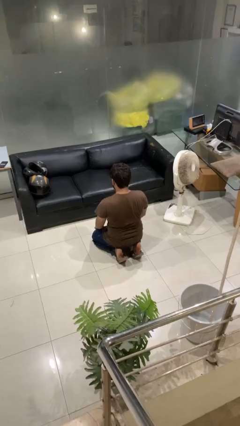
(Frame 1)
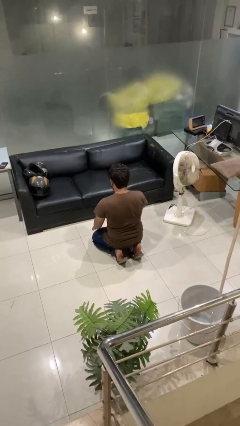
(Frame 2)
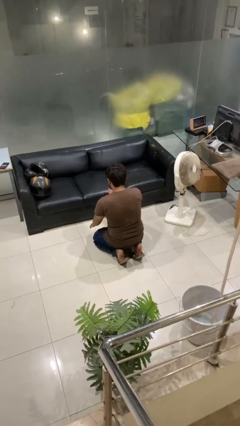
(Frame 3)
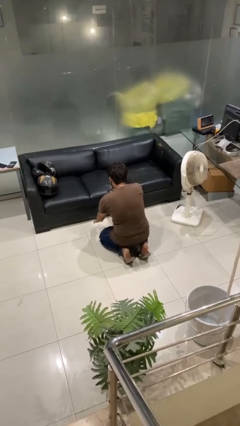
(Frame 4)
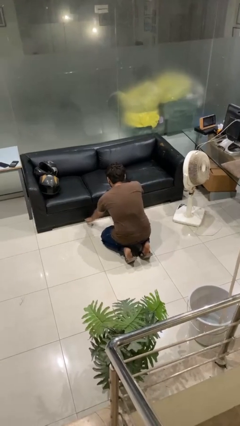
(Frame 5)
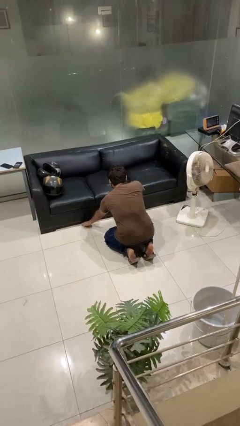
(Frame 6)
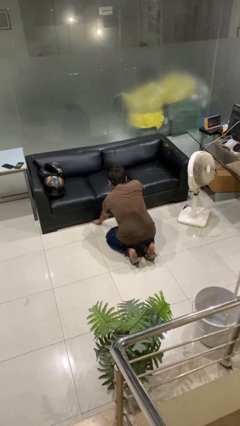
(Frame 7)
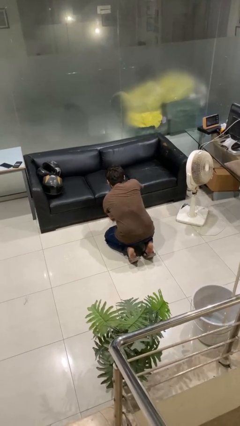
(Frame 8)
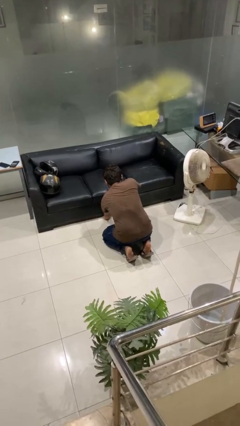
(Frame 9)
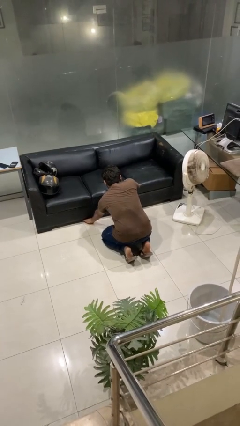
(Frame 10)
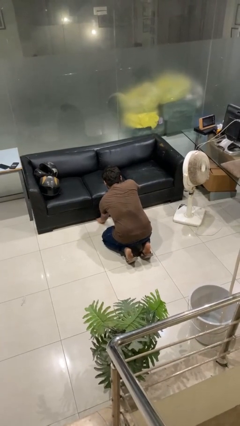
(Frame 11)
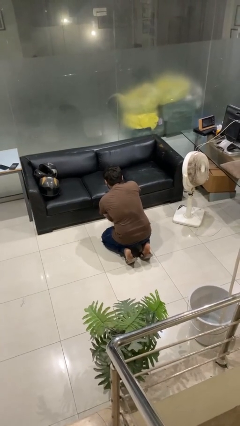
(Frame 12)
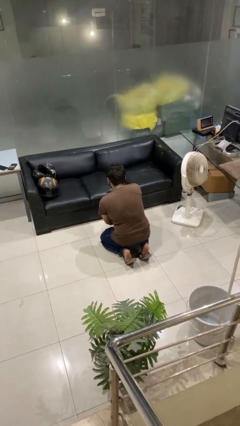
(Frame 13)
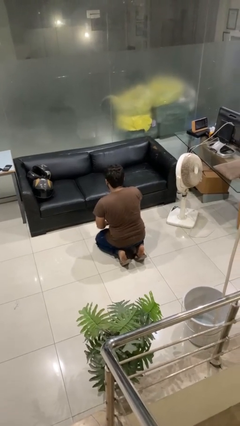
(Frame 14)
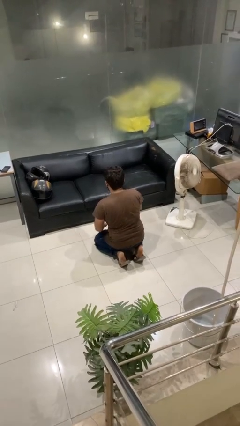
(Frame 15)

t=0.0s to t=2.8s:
person searches under couch

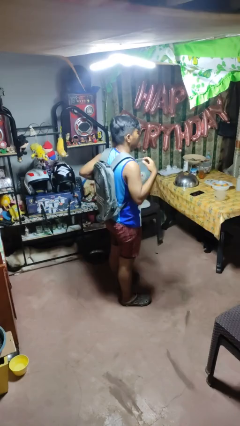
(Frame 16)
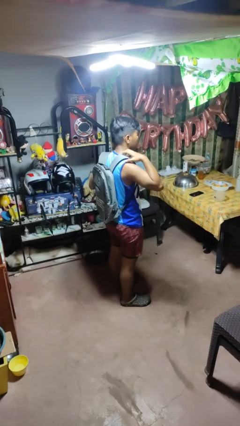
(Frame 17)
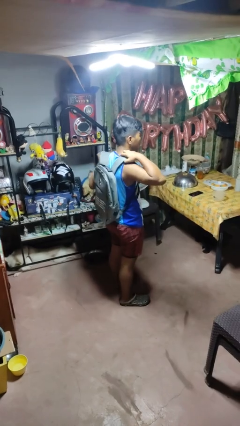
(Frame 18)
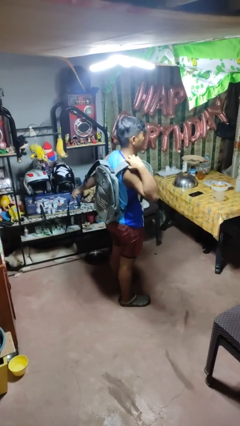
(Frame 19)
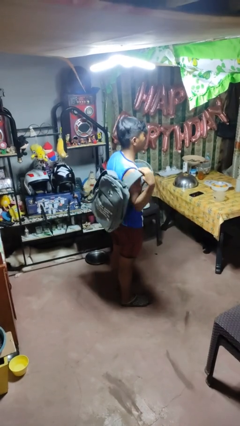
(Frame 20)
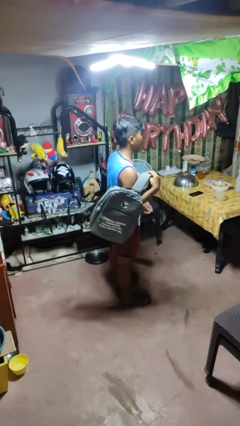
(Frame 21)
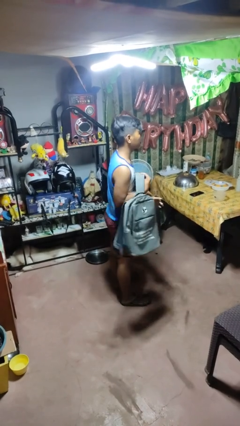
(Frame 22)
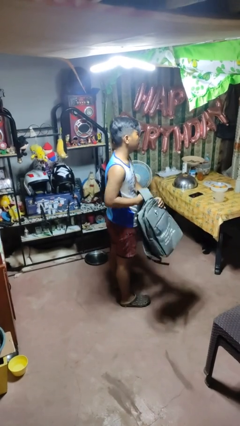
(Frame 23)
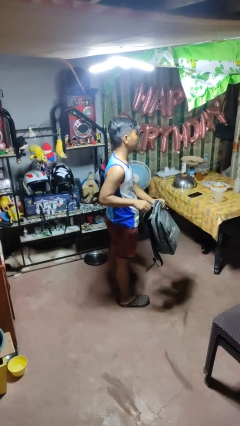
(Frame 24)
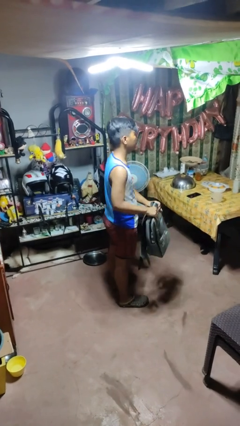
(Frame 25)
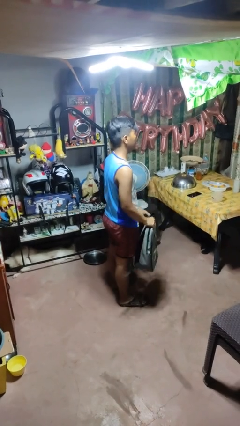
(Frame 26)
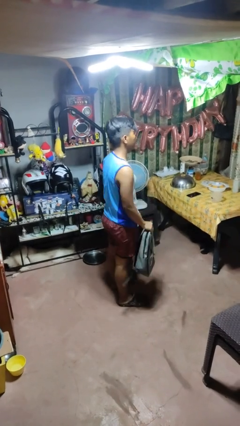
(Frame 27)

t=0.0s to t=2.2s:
person takes off backpack

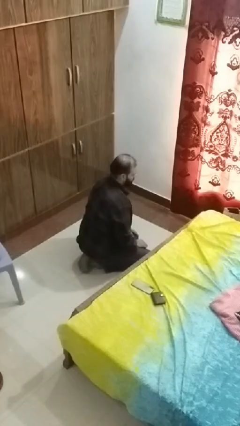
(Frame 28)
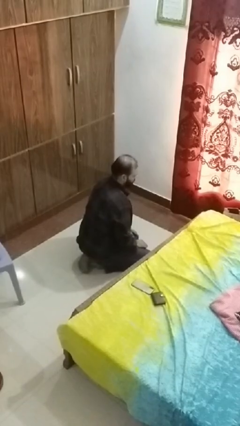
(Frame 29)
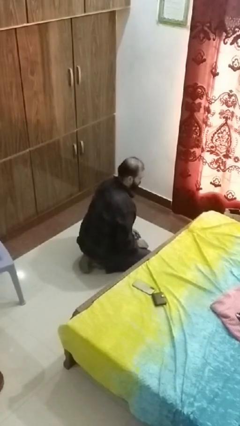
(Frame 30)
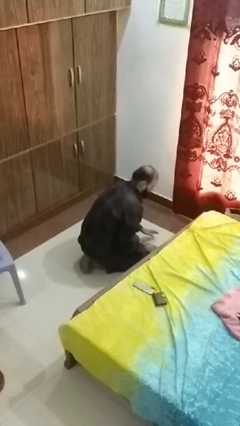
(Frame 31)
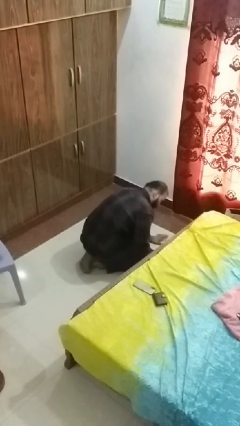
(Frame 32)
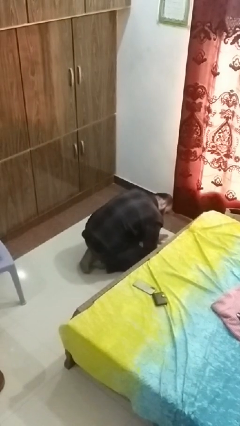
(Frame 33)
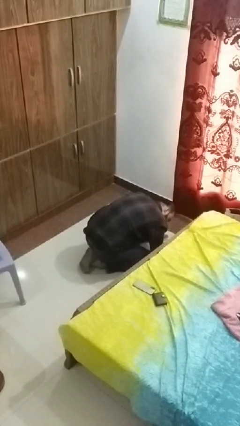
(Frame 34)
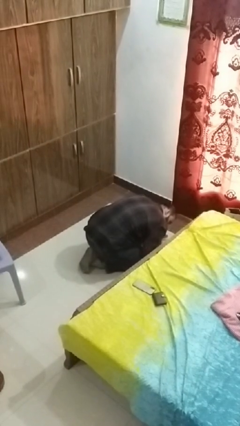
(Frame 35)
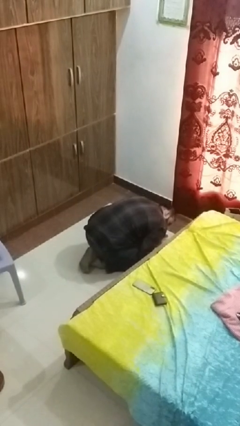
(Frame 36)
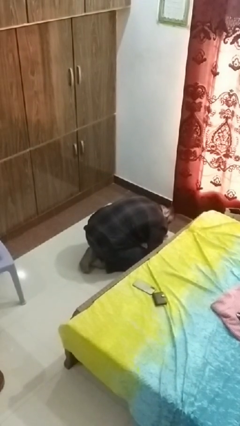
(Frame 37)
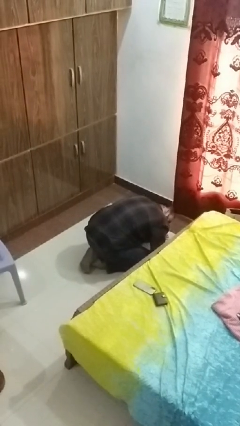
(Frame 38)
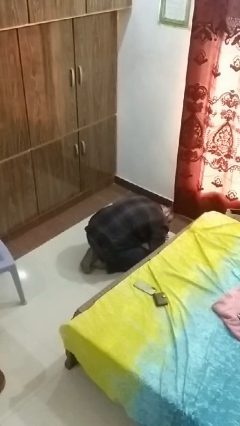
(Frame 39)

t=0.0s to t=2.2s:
person searches under bed

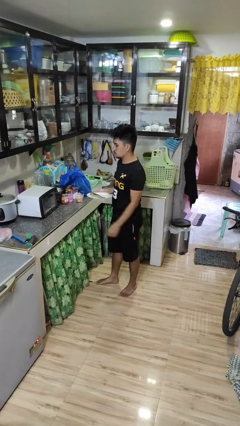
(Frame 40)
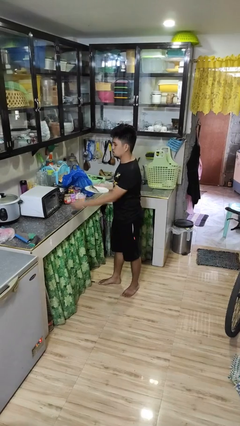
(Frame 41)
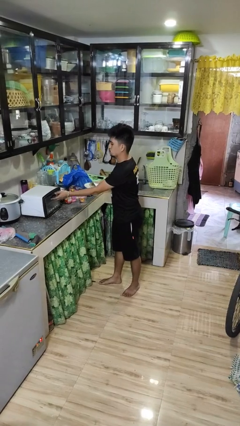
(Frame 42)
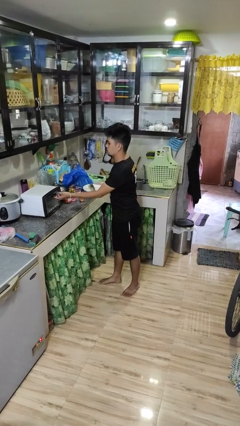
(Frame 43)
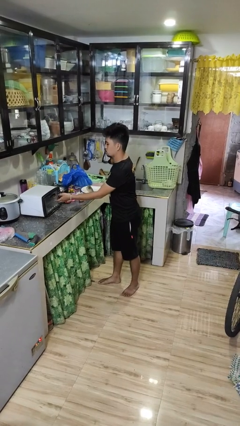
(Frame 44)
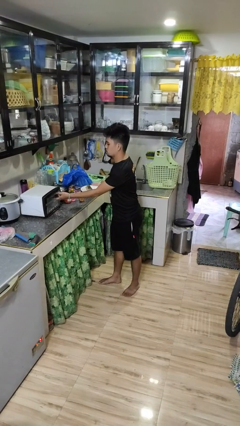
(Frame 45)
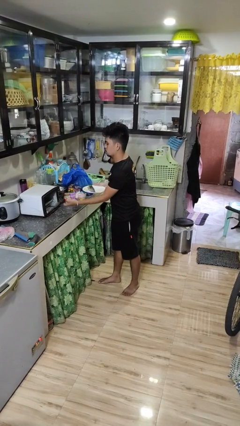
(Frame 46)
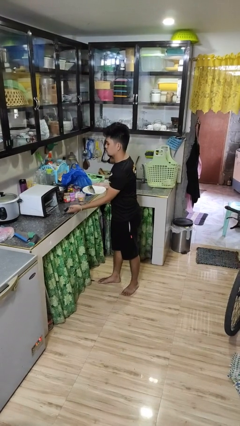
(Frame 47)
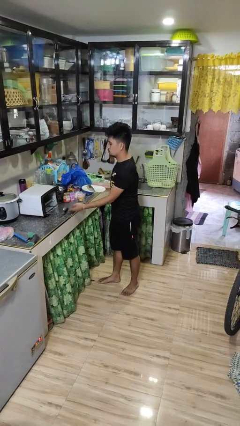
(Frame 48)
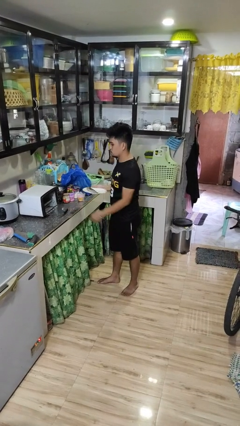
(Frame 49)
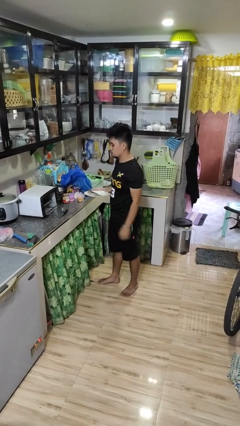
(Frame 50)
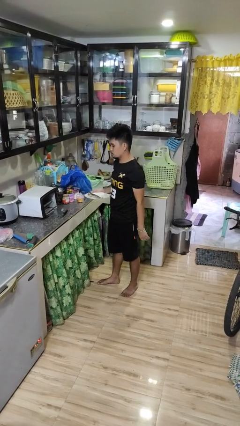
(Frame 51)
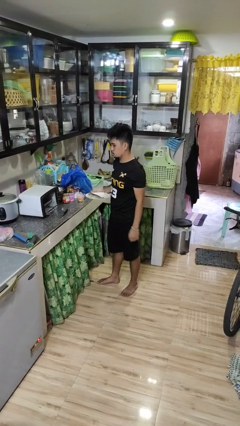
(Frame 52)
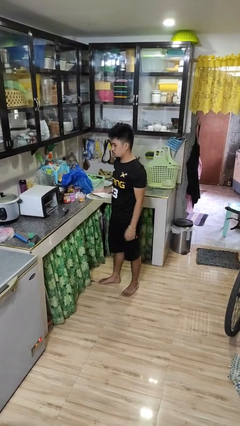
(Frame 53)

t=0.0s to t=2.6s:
person opens microwave

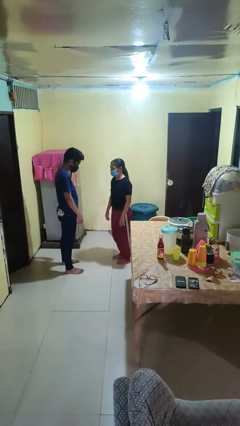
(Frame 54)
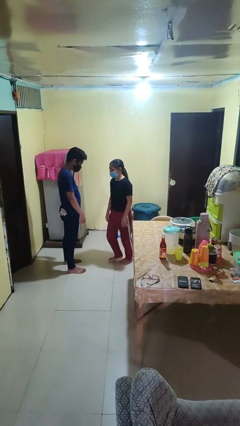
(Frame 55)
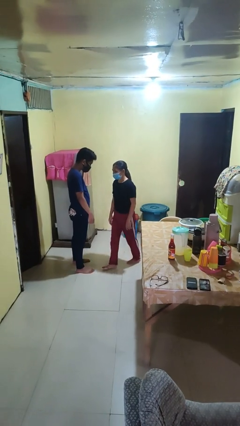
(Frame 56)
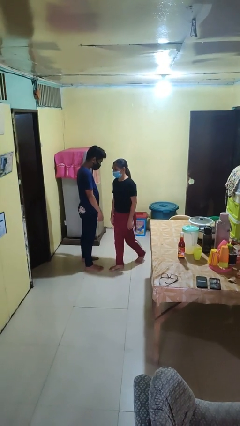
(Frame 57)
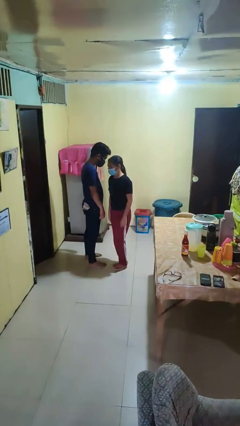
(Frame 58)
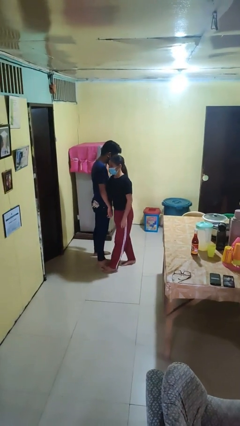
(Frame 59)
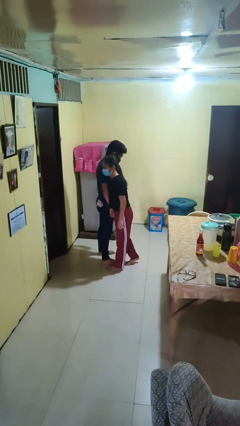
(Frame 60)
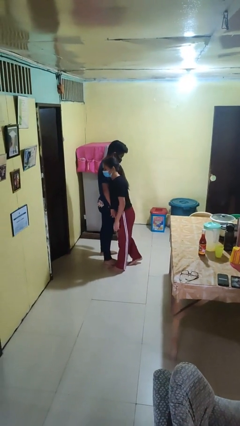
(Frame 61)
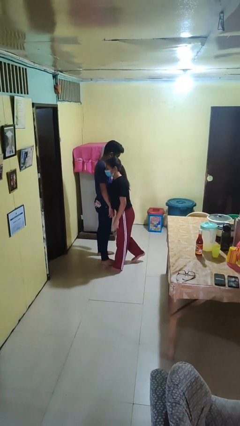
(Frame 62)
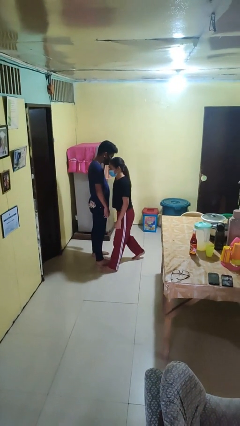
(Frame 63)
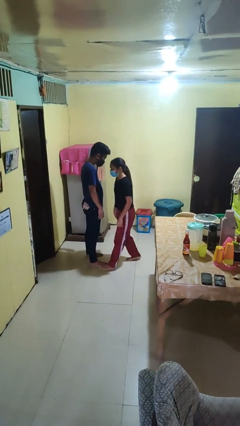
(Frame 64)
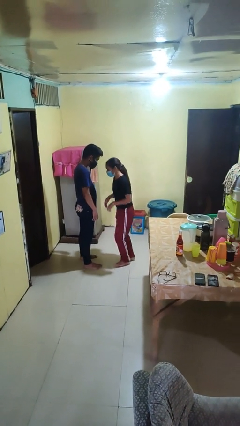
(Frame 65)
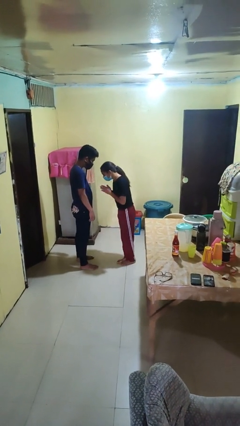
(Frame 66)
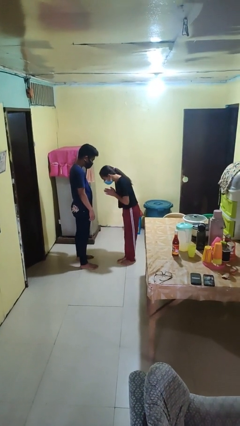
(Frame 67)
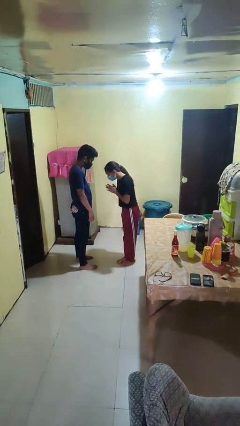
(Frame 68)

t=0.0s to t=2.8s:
person bumps into person

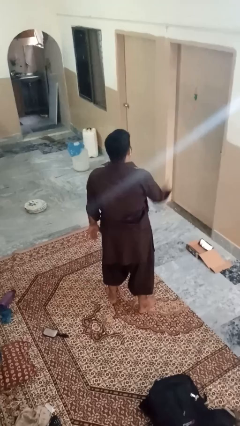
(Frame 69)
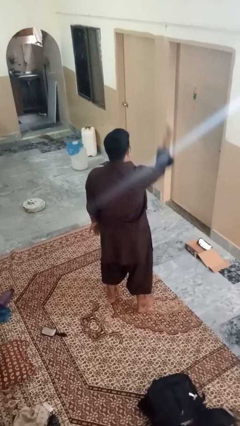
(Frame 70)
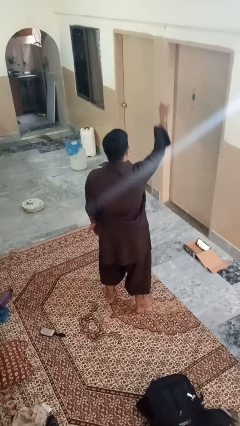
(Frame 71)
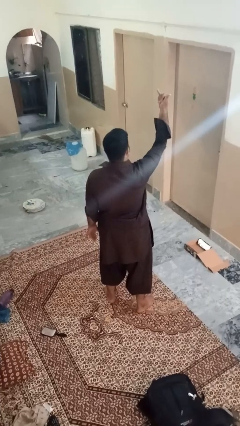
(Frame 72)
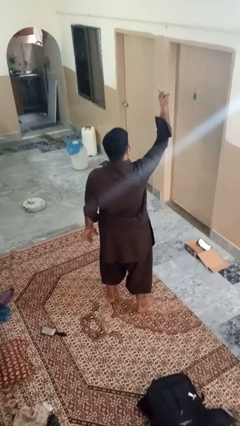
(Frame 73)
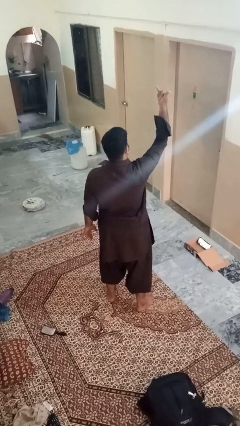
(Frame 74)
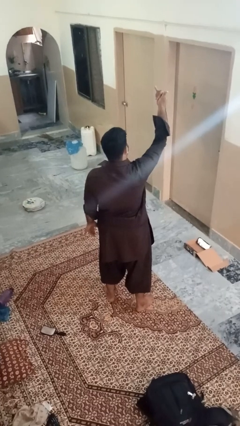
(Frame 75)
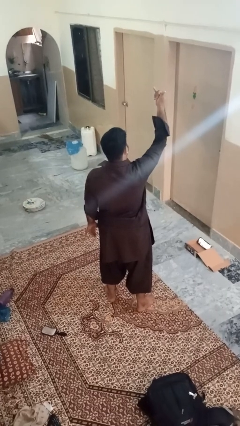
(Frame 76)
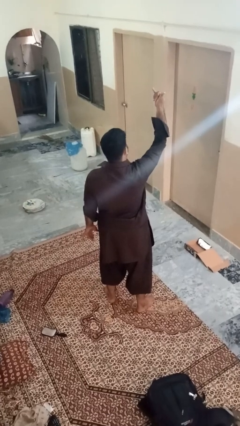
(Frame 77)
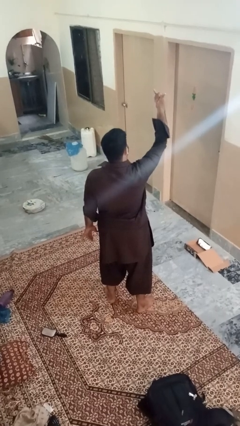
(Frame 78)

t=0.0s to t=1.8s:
person gestures hang loose

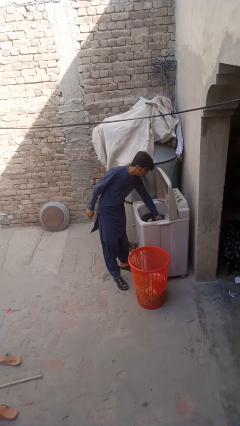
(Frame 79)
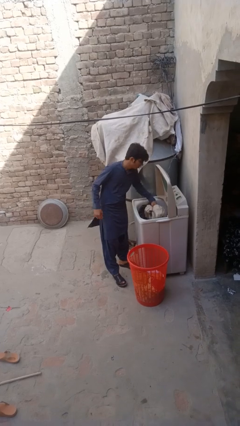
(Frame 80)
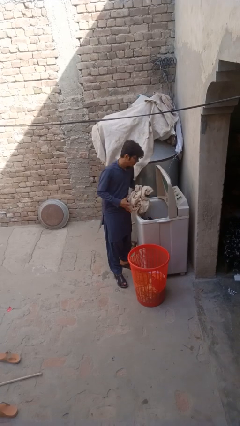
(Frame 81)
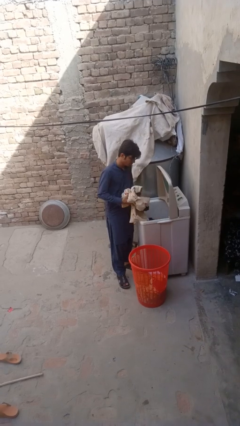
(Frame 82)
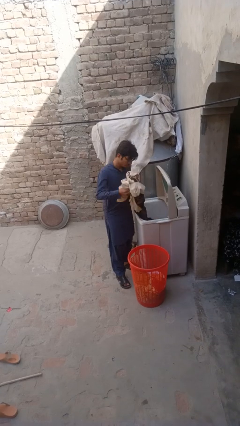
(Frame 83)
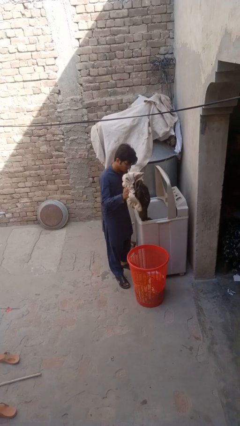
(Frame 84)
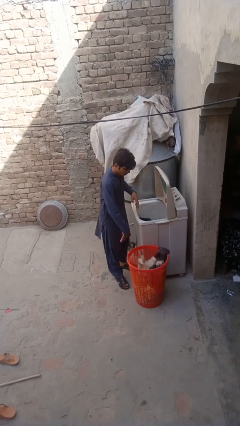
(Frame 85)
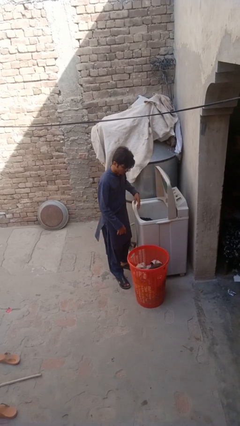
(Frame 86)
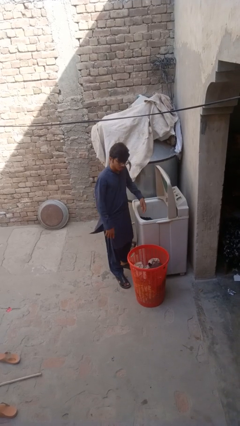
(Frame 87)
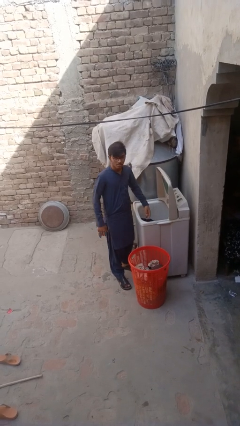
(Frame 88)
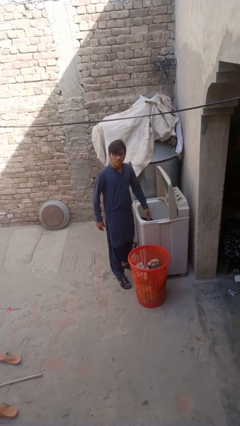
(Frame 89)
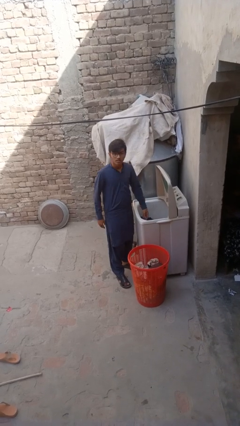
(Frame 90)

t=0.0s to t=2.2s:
person unloads clotheswasher

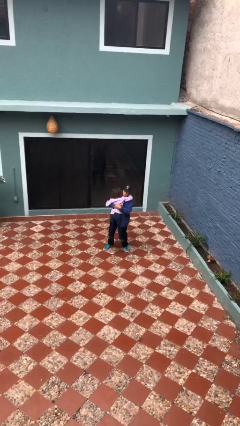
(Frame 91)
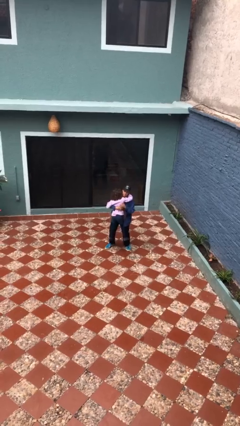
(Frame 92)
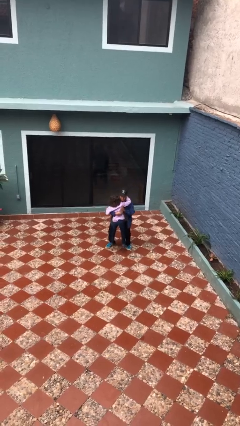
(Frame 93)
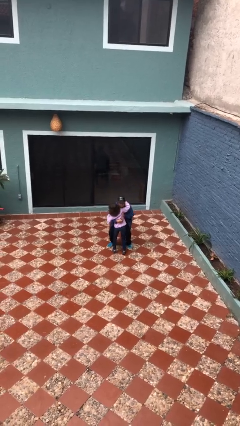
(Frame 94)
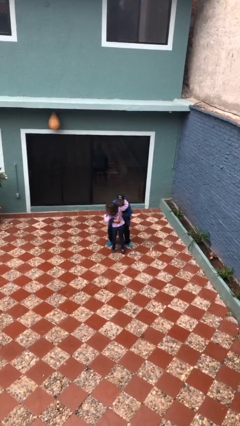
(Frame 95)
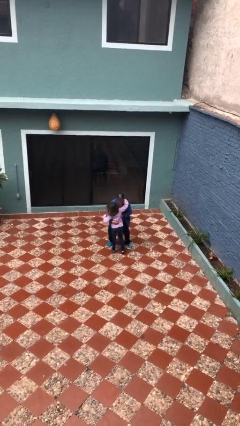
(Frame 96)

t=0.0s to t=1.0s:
person puts down person
